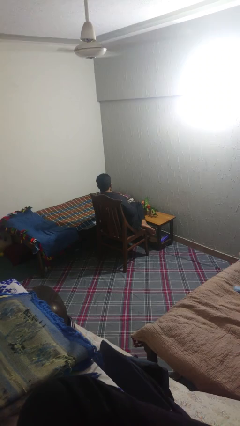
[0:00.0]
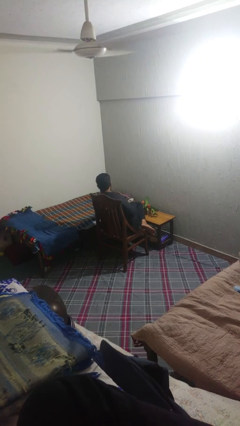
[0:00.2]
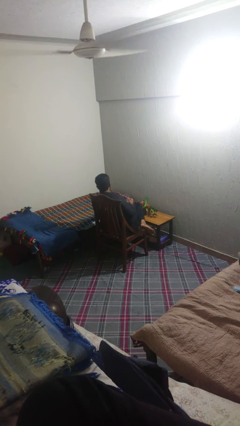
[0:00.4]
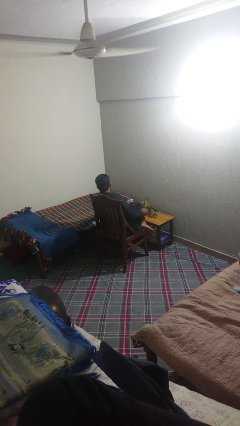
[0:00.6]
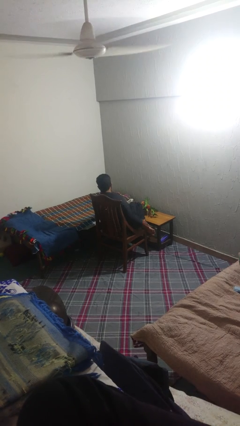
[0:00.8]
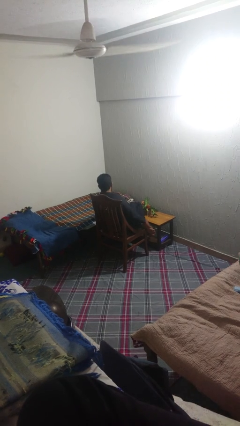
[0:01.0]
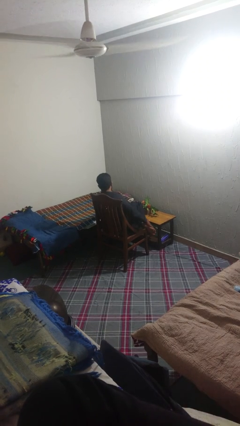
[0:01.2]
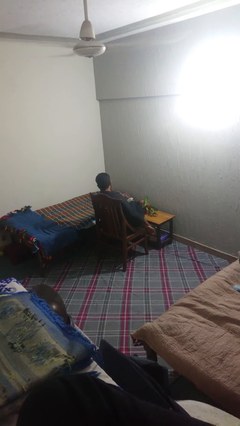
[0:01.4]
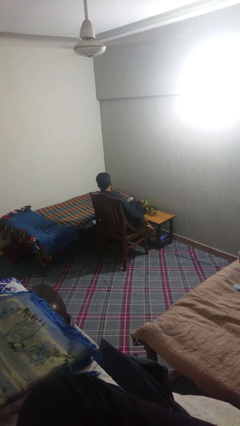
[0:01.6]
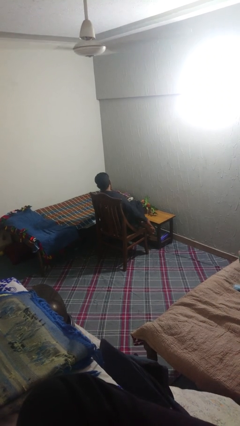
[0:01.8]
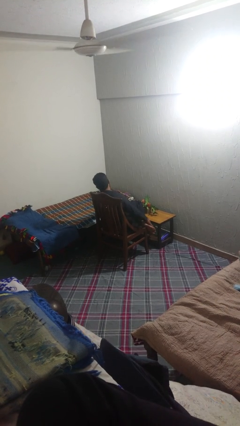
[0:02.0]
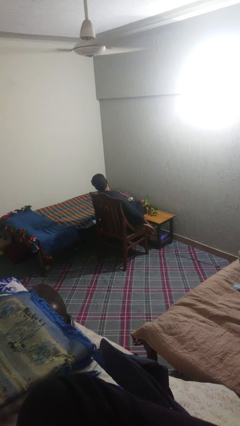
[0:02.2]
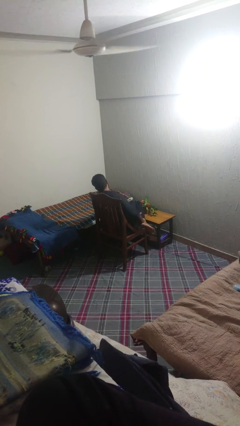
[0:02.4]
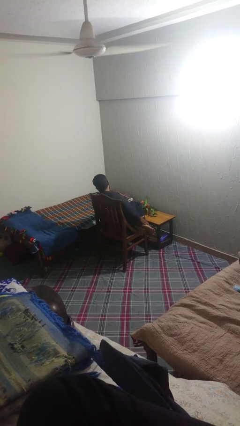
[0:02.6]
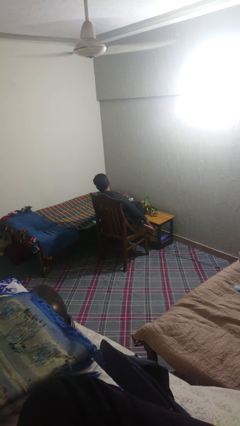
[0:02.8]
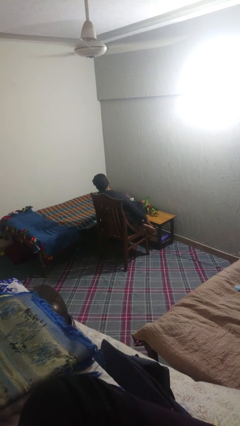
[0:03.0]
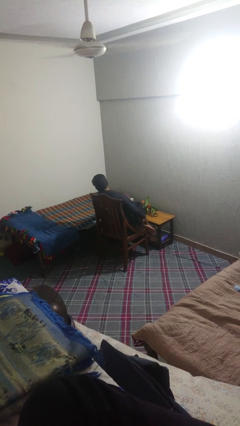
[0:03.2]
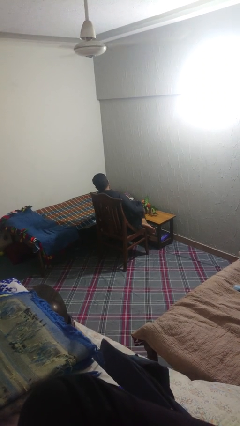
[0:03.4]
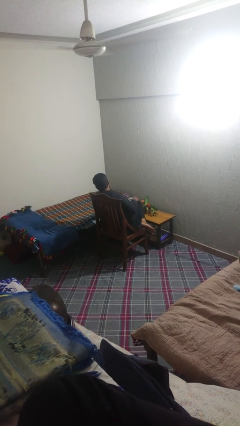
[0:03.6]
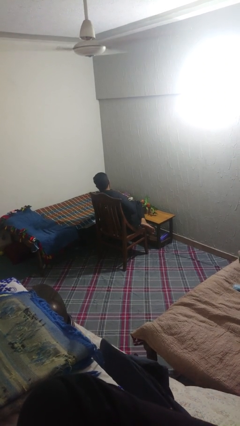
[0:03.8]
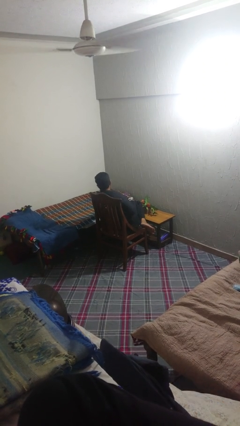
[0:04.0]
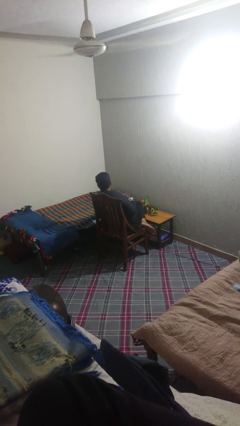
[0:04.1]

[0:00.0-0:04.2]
person rubs foot

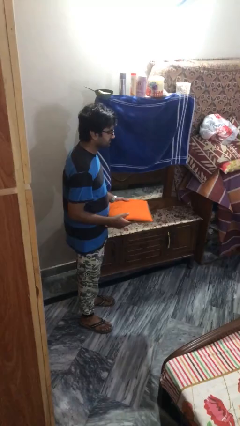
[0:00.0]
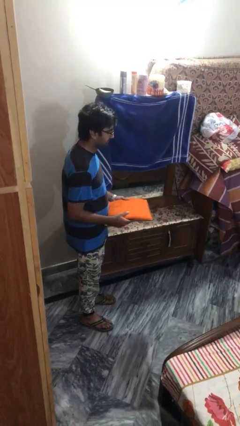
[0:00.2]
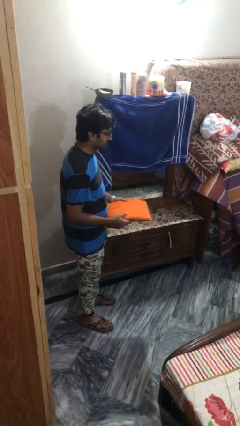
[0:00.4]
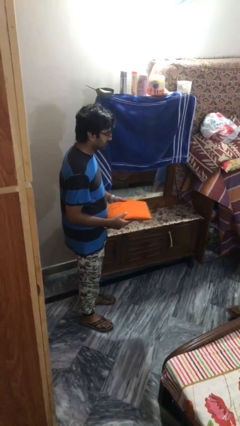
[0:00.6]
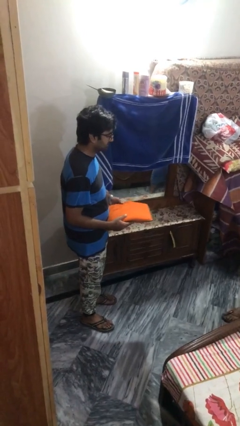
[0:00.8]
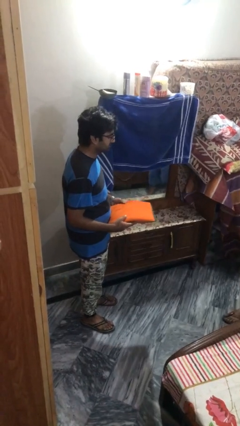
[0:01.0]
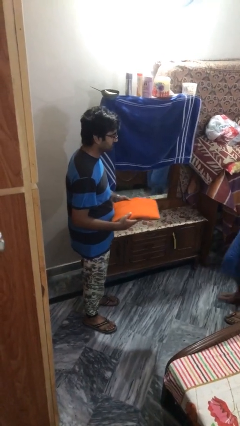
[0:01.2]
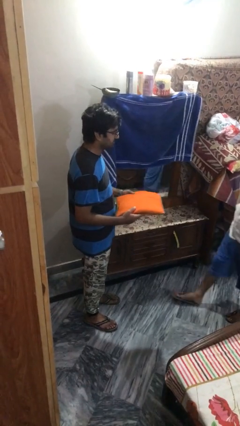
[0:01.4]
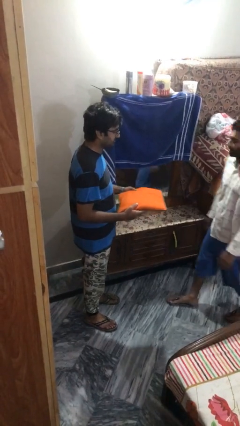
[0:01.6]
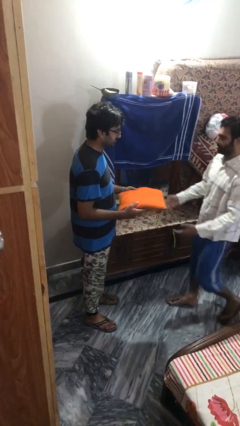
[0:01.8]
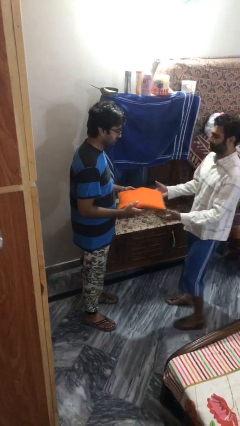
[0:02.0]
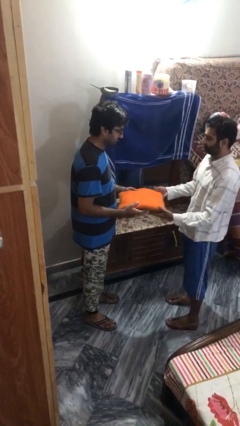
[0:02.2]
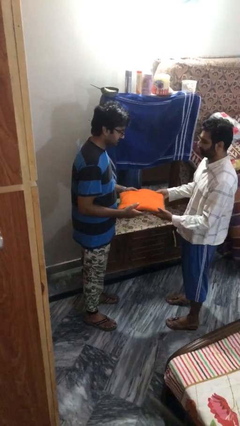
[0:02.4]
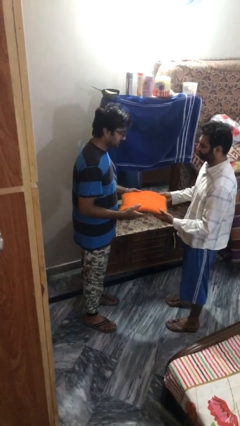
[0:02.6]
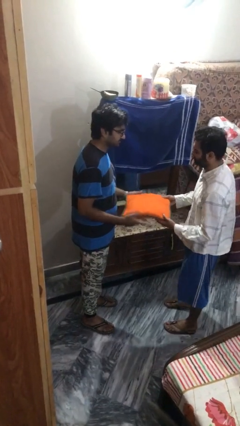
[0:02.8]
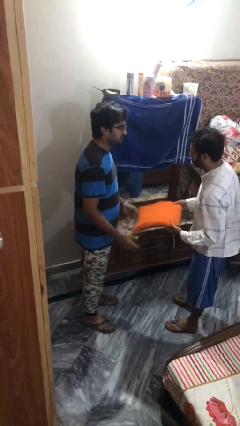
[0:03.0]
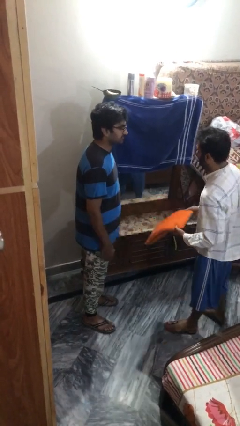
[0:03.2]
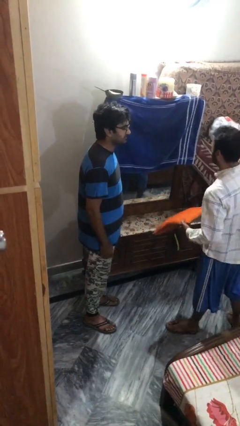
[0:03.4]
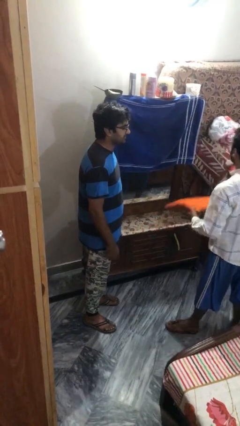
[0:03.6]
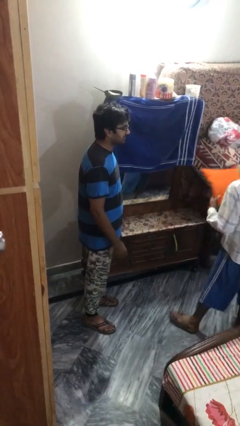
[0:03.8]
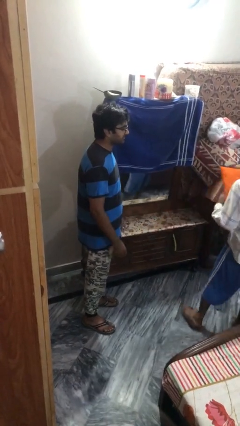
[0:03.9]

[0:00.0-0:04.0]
person transfers object to person

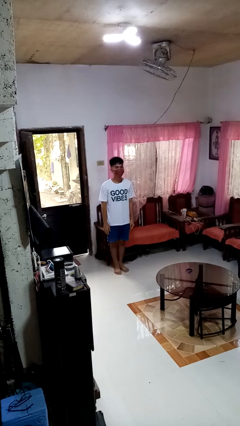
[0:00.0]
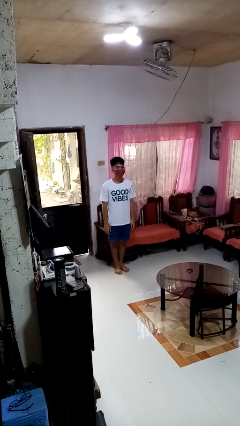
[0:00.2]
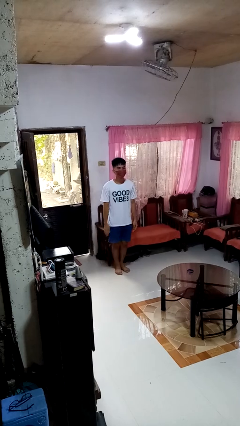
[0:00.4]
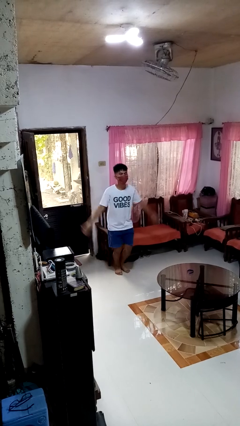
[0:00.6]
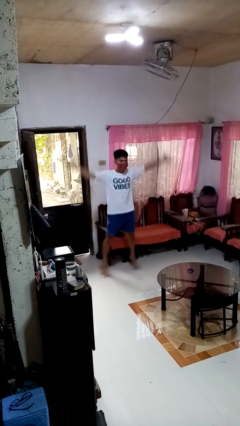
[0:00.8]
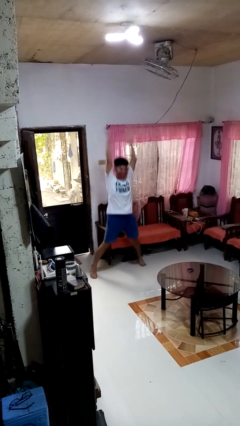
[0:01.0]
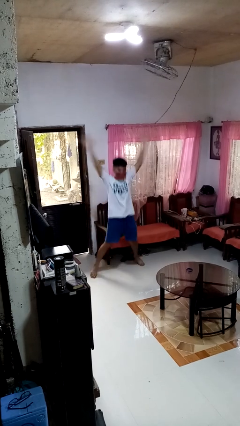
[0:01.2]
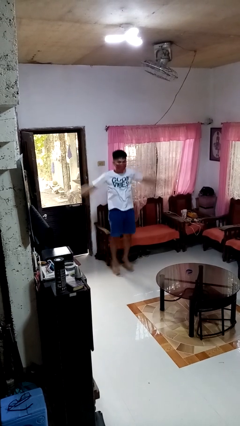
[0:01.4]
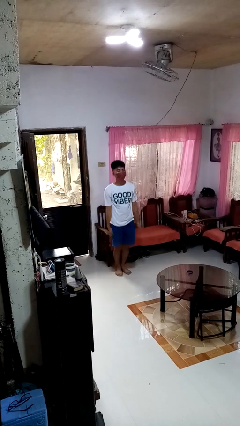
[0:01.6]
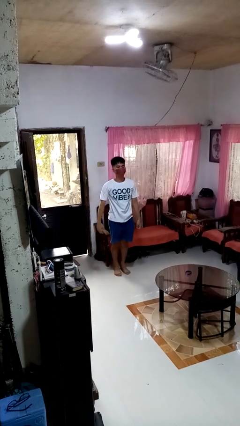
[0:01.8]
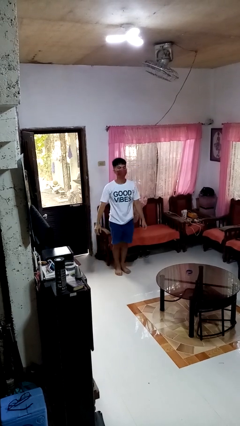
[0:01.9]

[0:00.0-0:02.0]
person exercises with jumping jacks

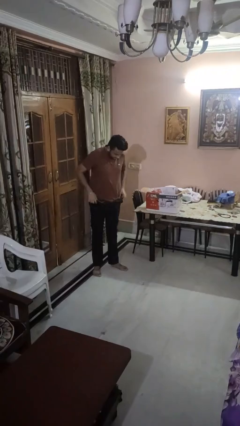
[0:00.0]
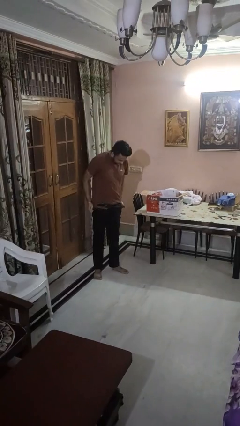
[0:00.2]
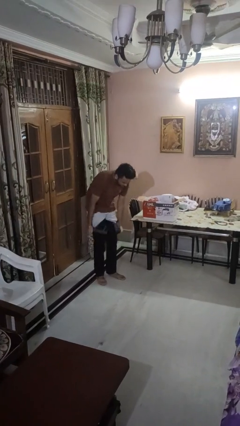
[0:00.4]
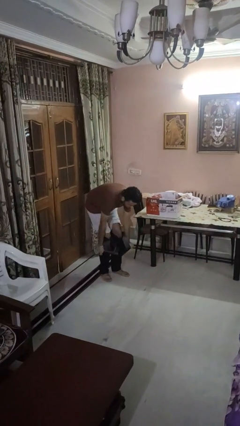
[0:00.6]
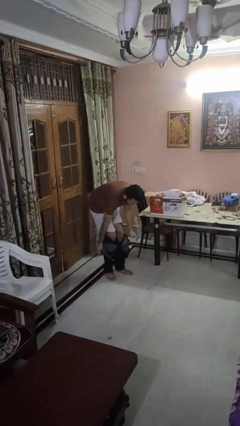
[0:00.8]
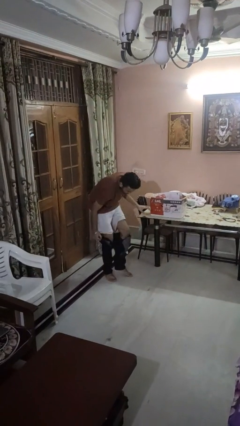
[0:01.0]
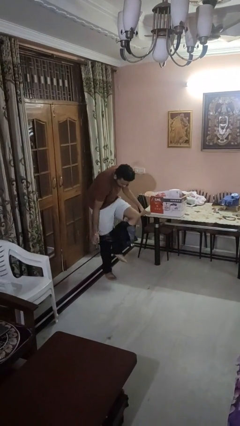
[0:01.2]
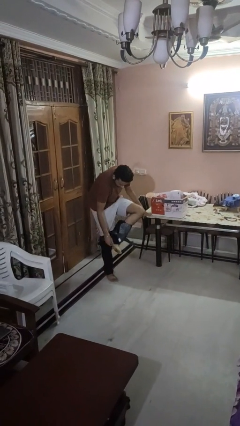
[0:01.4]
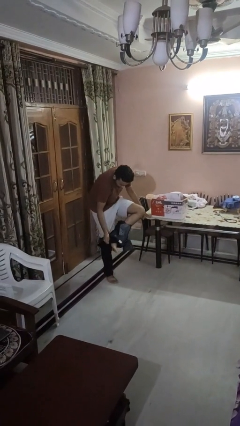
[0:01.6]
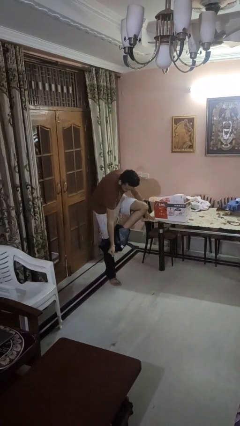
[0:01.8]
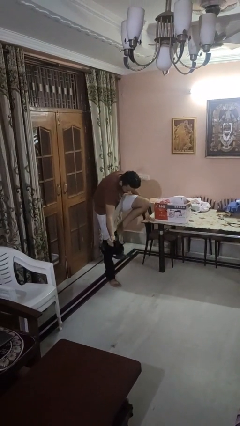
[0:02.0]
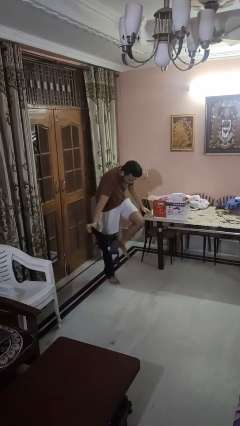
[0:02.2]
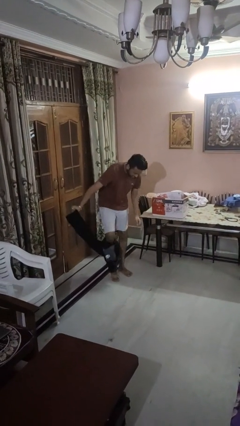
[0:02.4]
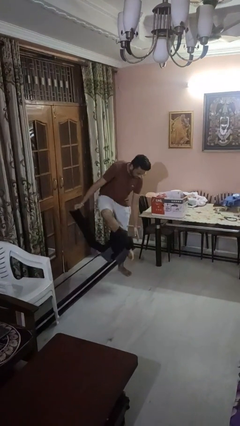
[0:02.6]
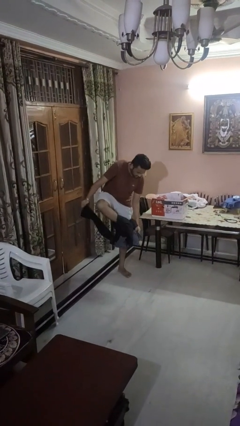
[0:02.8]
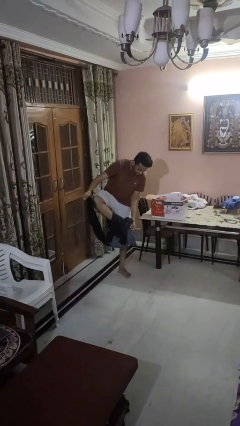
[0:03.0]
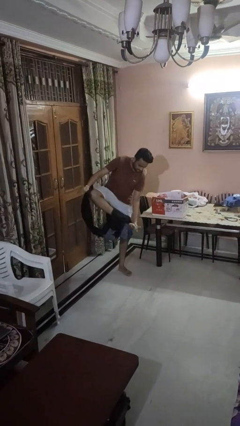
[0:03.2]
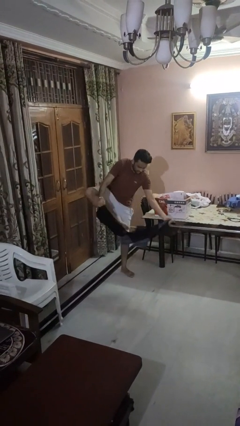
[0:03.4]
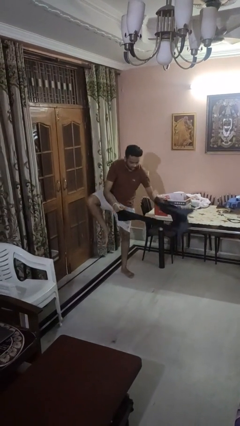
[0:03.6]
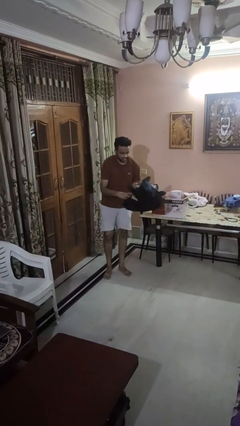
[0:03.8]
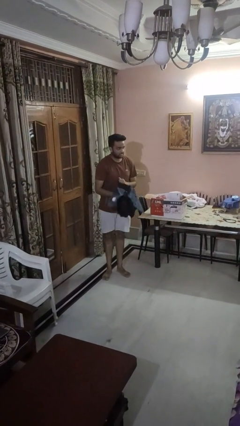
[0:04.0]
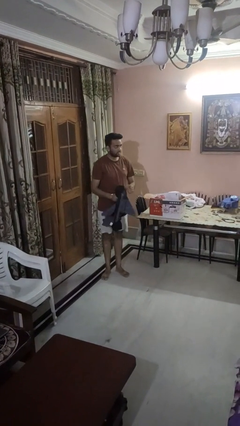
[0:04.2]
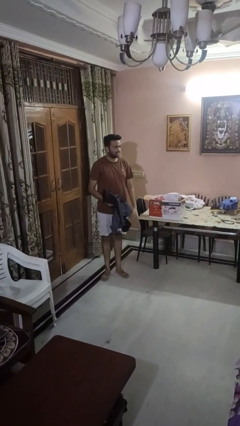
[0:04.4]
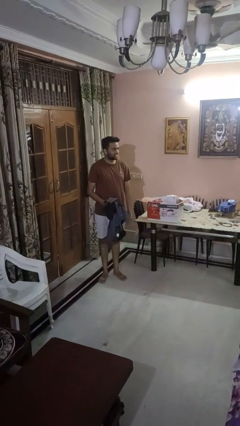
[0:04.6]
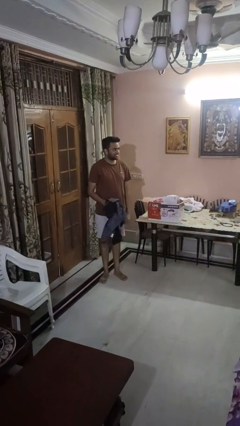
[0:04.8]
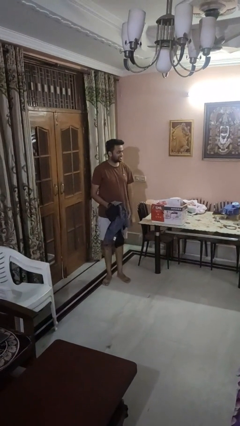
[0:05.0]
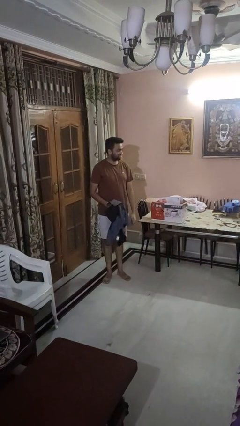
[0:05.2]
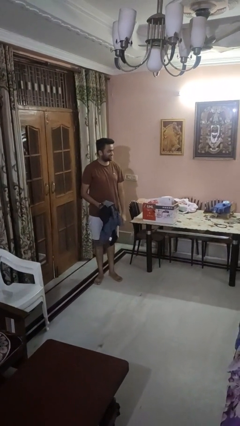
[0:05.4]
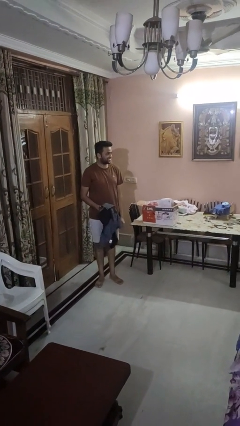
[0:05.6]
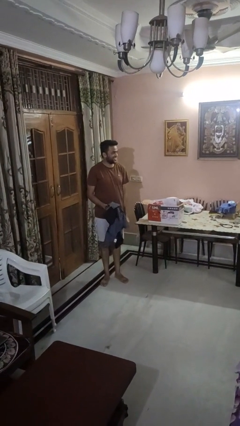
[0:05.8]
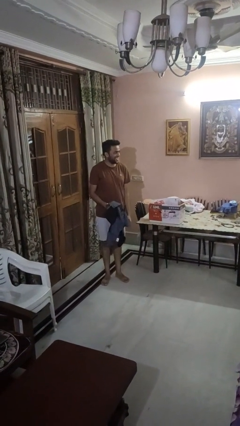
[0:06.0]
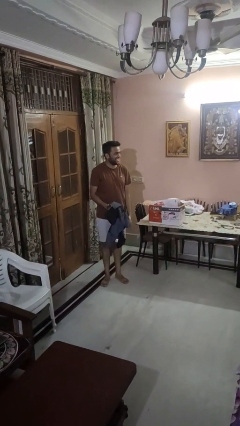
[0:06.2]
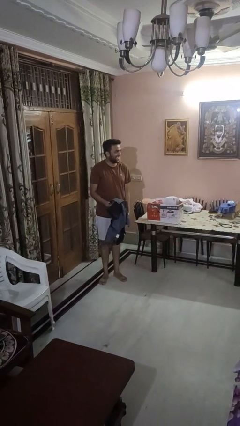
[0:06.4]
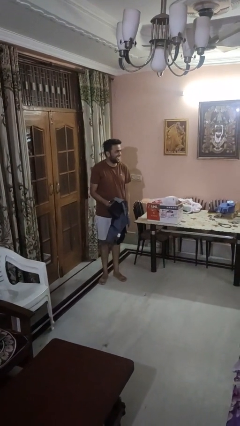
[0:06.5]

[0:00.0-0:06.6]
person takes off pants

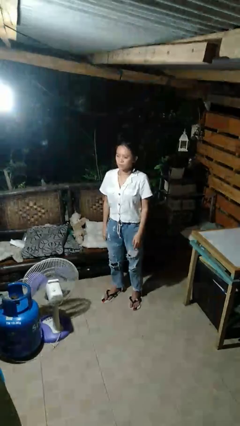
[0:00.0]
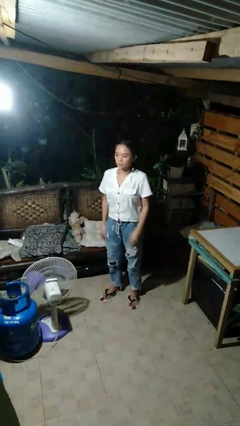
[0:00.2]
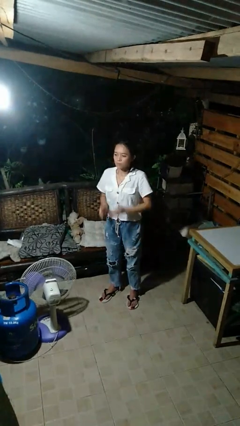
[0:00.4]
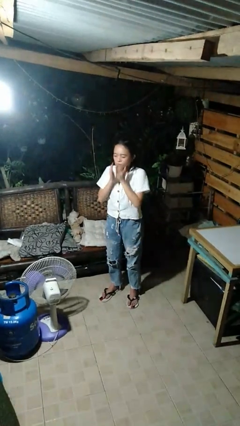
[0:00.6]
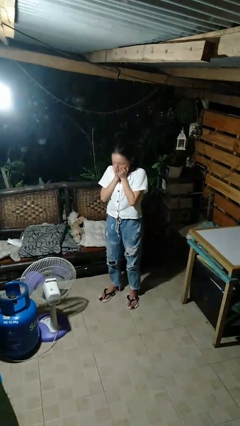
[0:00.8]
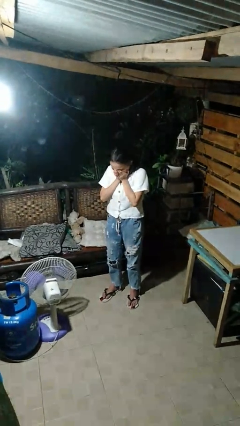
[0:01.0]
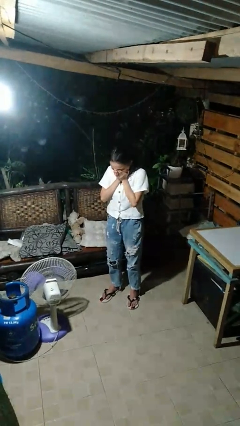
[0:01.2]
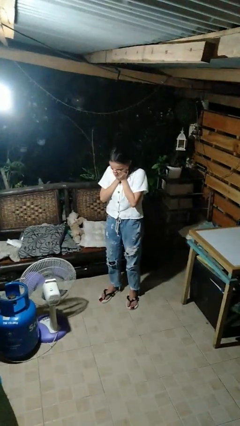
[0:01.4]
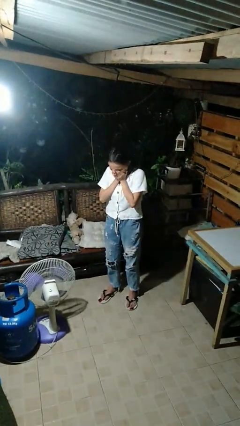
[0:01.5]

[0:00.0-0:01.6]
person sneezes into hand
